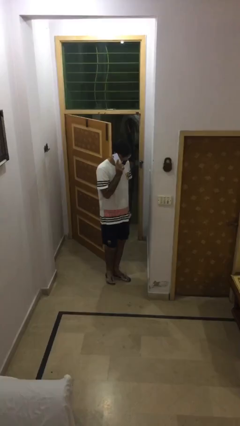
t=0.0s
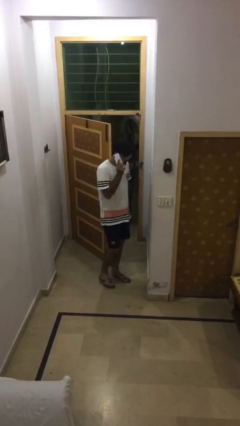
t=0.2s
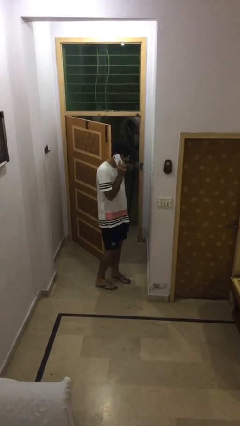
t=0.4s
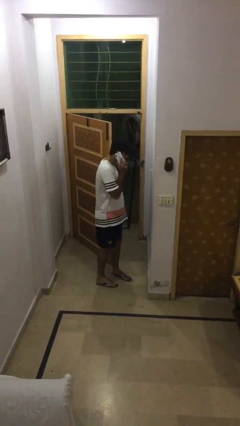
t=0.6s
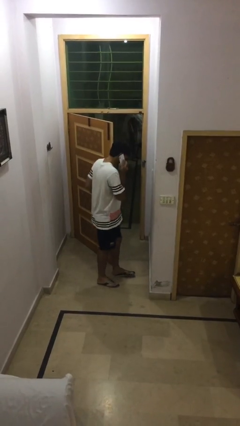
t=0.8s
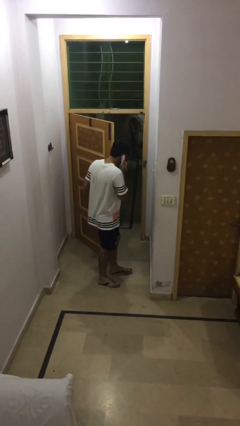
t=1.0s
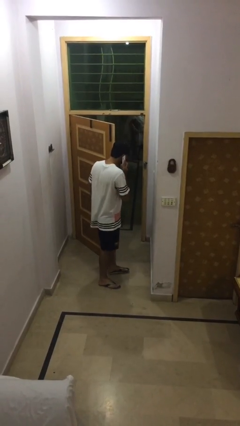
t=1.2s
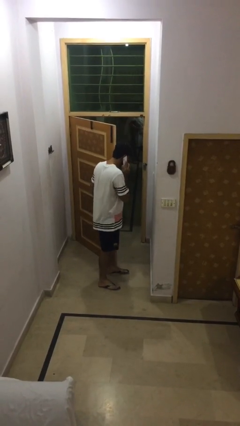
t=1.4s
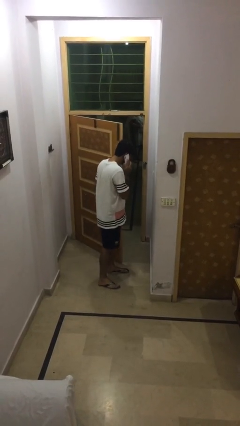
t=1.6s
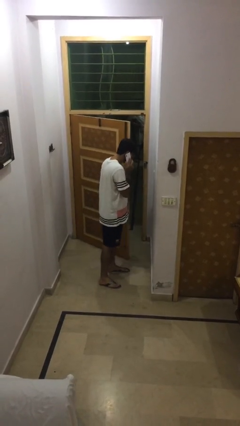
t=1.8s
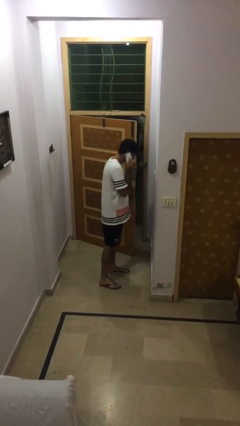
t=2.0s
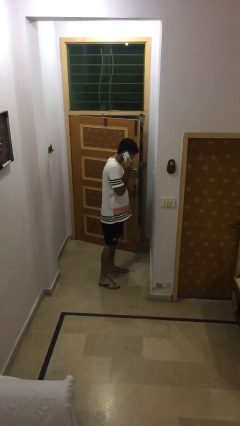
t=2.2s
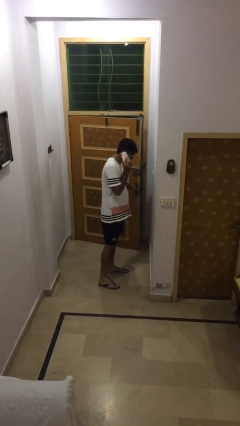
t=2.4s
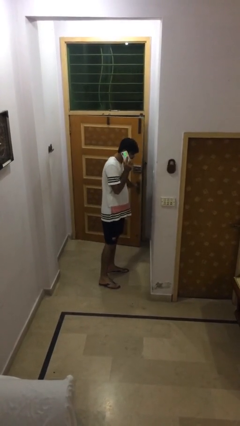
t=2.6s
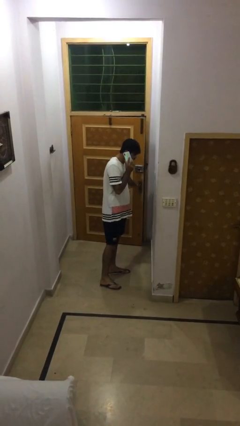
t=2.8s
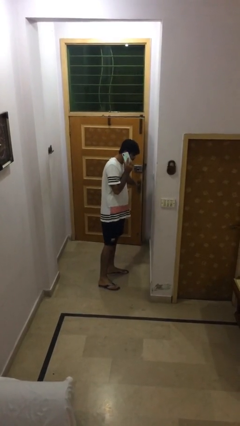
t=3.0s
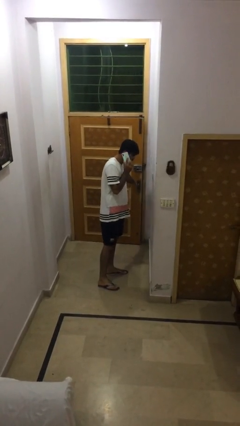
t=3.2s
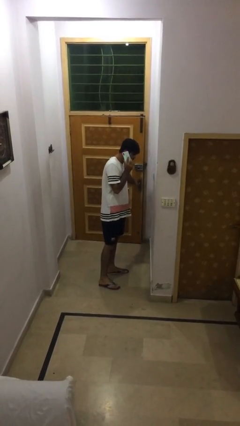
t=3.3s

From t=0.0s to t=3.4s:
person closes facility door

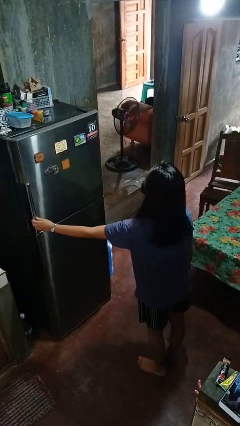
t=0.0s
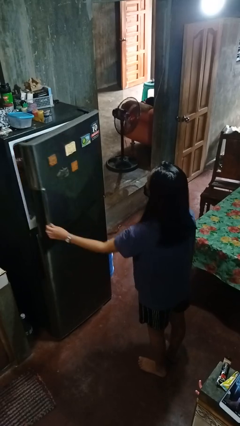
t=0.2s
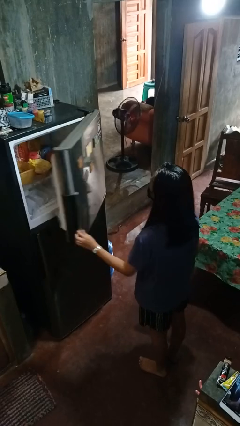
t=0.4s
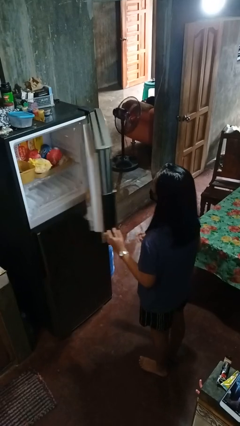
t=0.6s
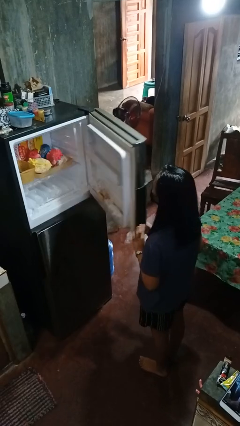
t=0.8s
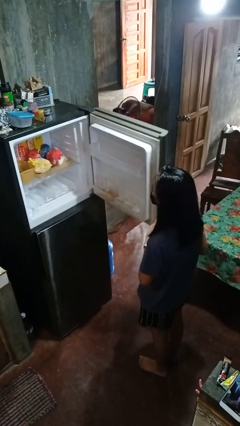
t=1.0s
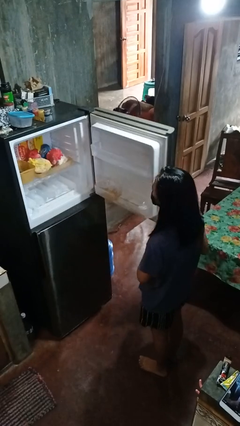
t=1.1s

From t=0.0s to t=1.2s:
person opens refrigerator

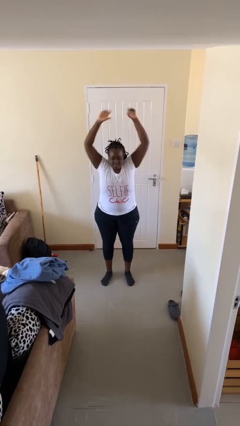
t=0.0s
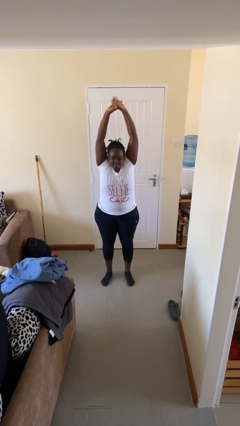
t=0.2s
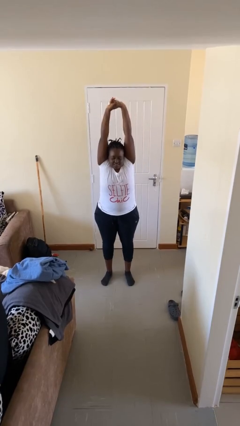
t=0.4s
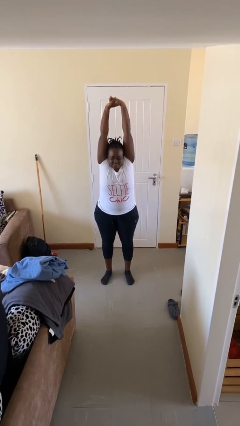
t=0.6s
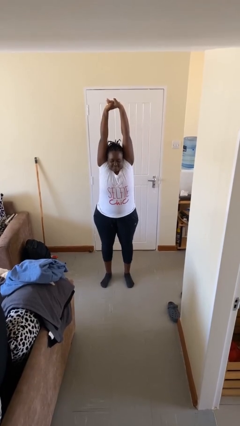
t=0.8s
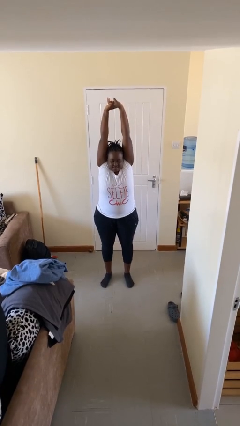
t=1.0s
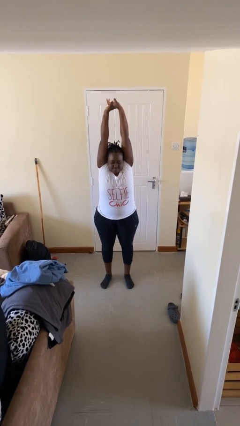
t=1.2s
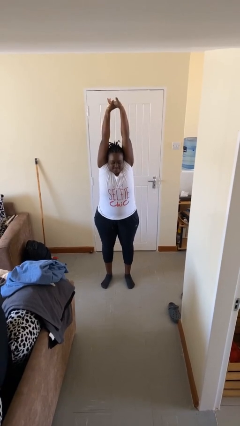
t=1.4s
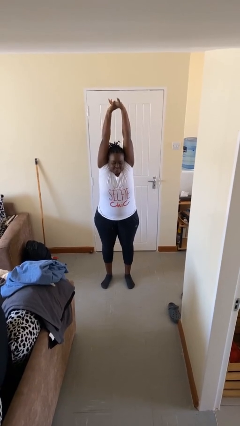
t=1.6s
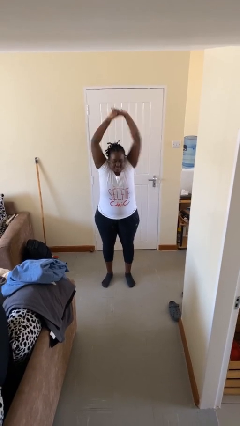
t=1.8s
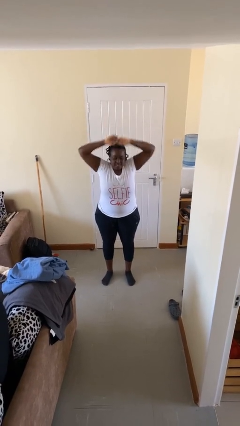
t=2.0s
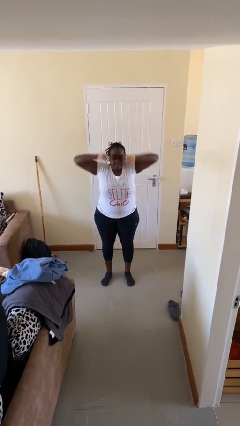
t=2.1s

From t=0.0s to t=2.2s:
person stretches arms over head

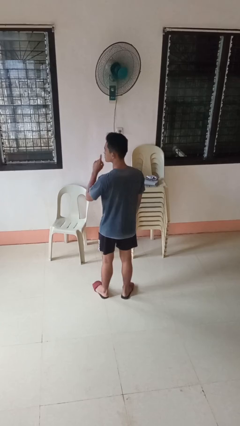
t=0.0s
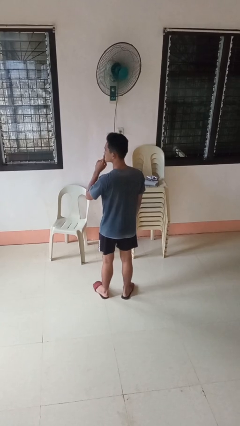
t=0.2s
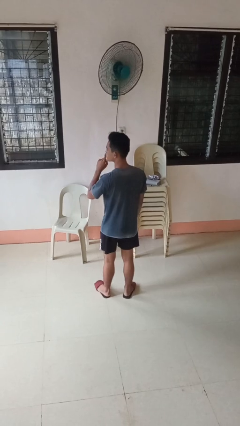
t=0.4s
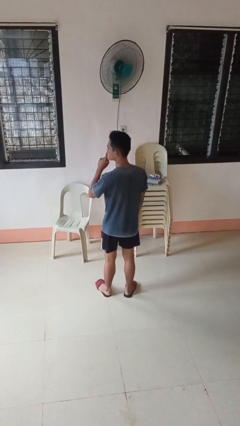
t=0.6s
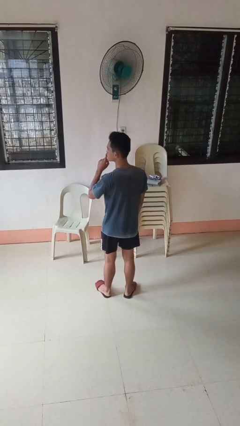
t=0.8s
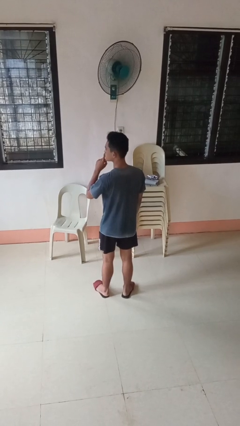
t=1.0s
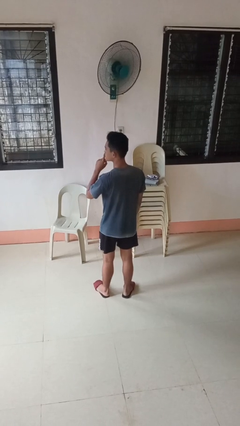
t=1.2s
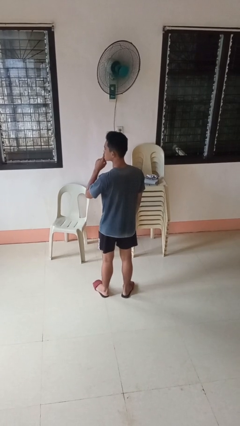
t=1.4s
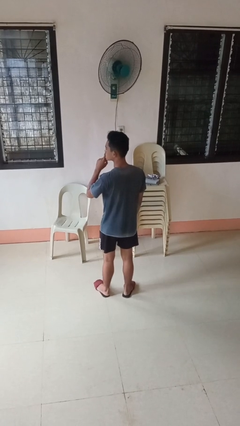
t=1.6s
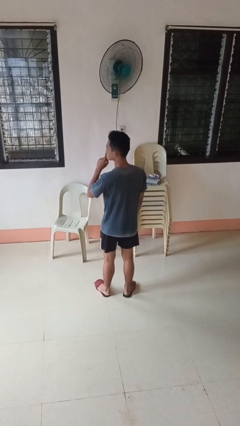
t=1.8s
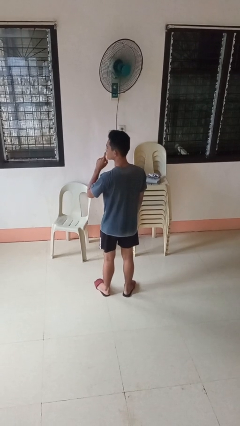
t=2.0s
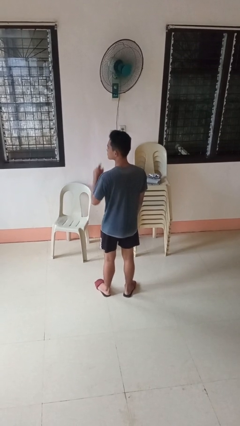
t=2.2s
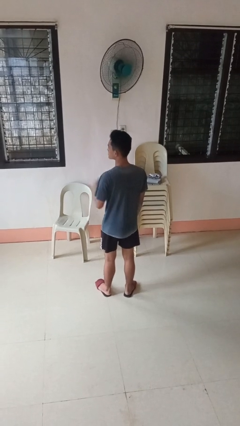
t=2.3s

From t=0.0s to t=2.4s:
person gestures be quiet

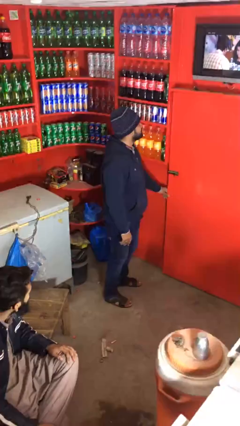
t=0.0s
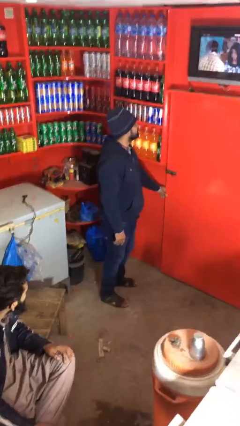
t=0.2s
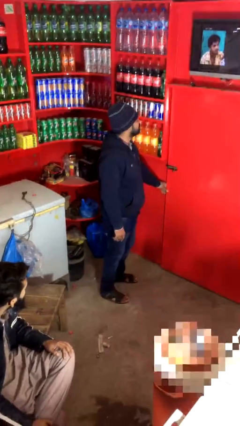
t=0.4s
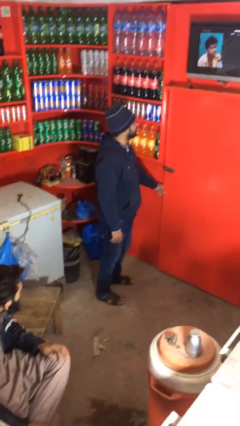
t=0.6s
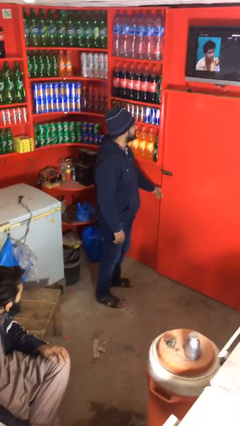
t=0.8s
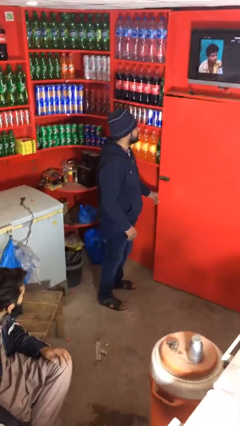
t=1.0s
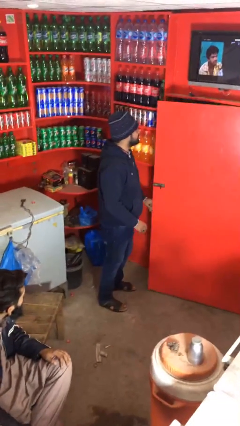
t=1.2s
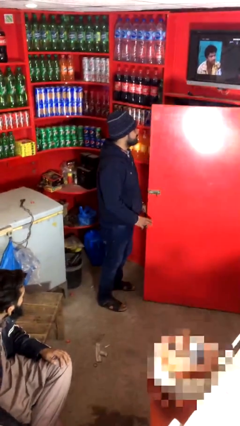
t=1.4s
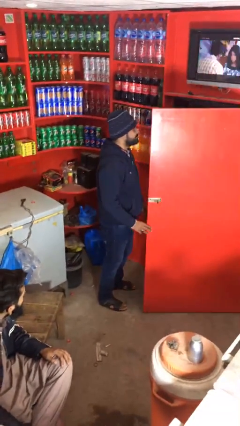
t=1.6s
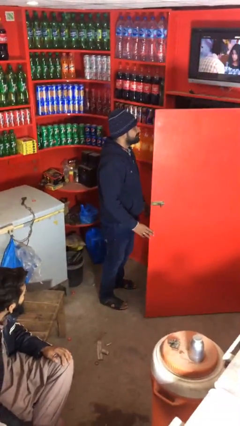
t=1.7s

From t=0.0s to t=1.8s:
person opens facility door

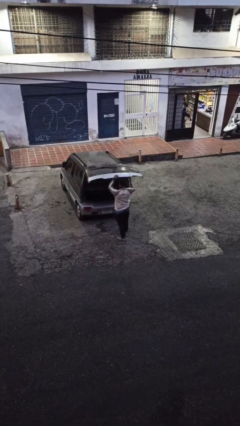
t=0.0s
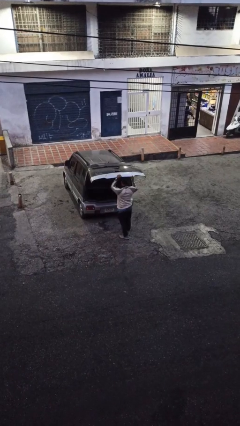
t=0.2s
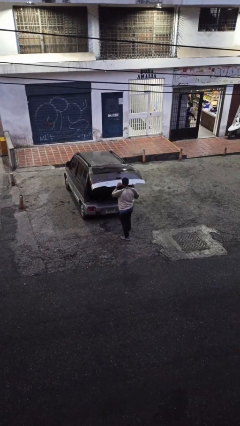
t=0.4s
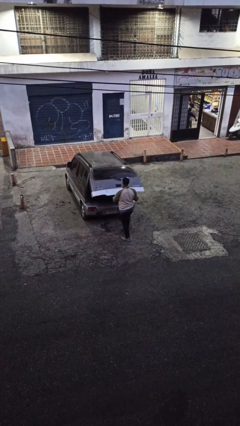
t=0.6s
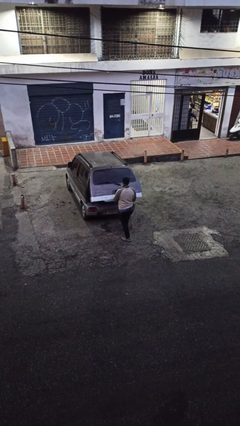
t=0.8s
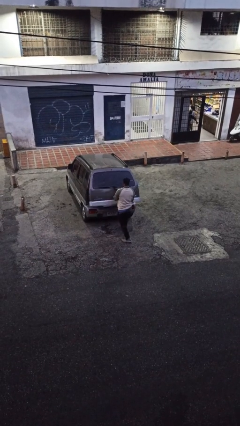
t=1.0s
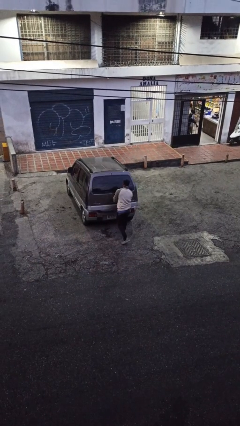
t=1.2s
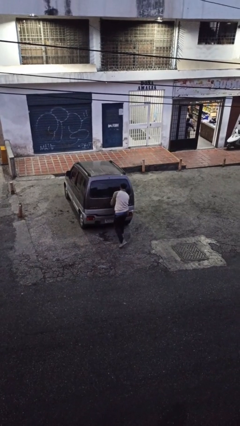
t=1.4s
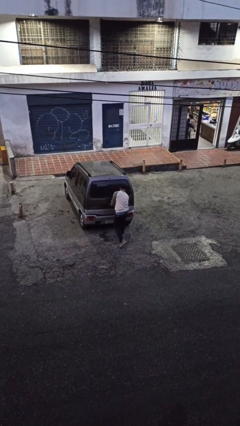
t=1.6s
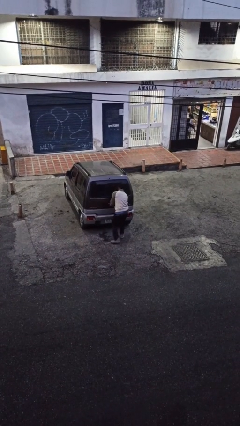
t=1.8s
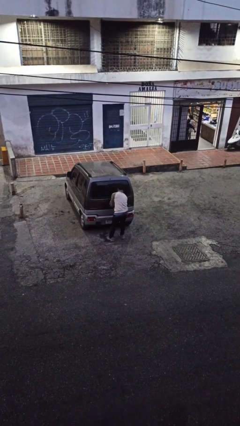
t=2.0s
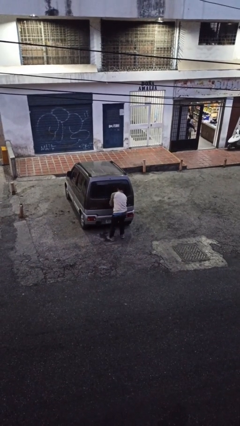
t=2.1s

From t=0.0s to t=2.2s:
person closes car trunk

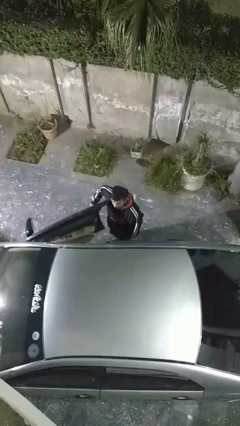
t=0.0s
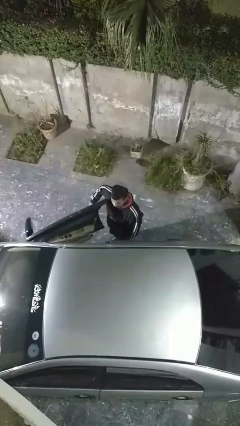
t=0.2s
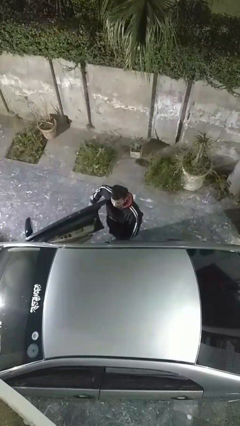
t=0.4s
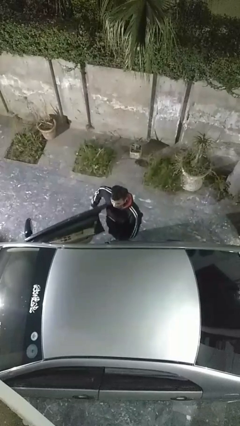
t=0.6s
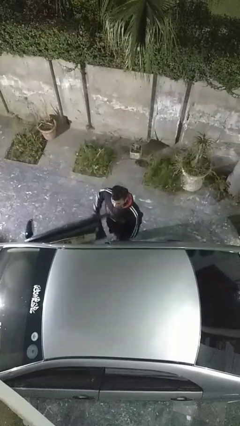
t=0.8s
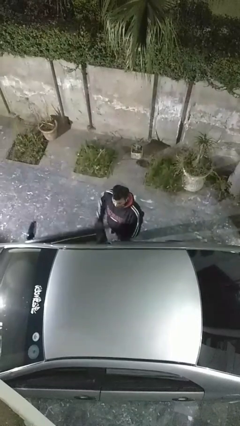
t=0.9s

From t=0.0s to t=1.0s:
person closes car door

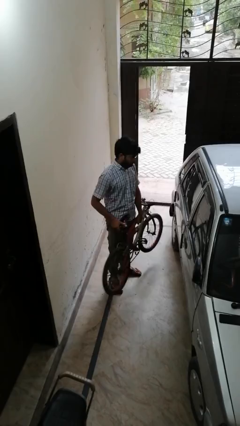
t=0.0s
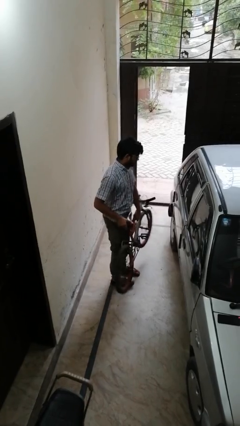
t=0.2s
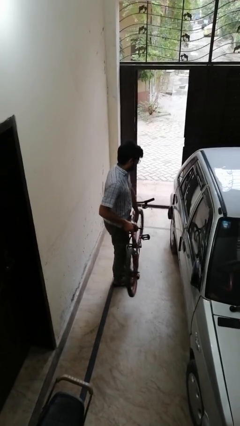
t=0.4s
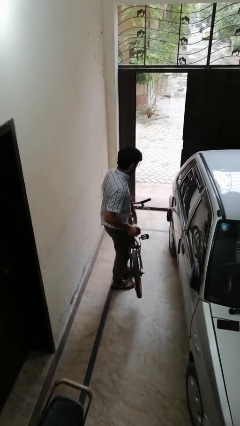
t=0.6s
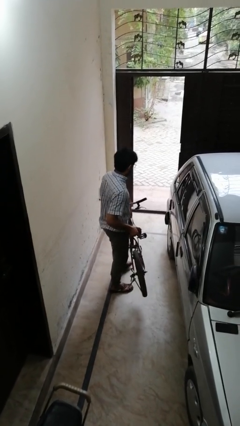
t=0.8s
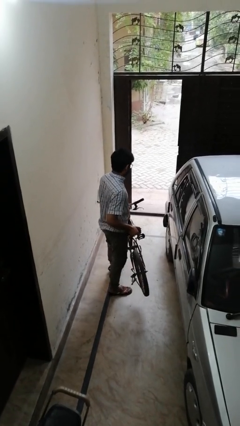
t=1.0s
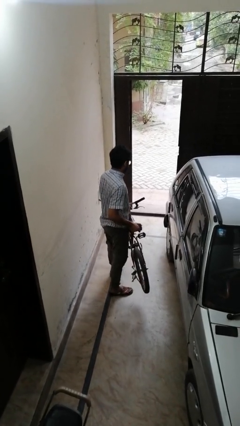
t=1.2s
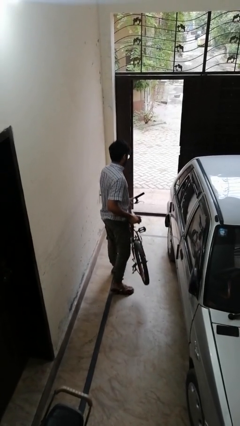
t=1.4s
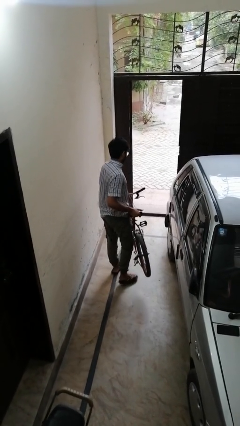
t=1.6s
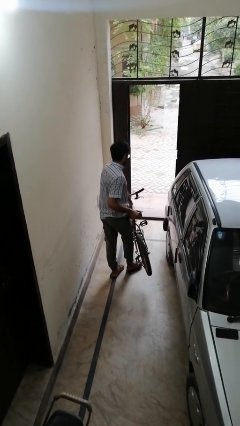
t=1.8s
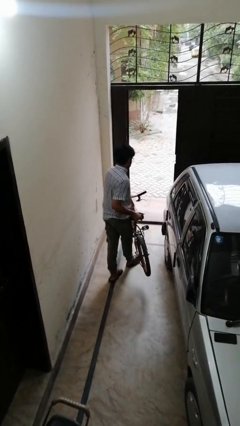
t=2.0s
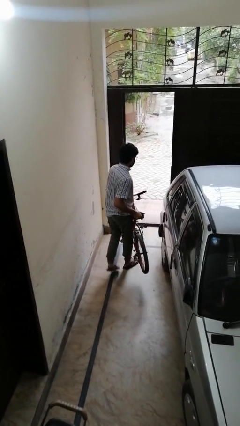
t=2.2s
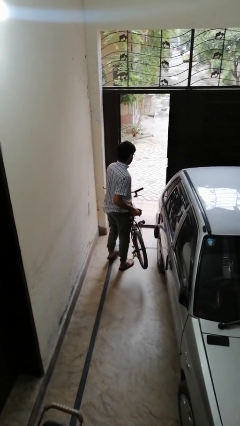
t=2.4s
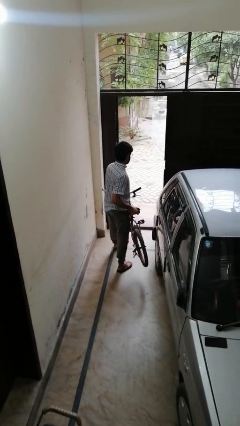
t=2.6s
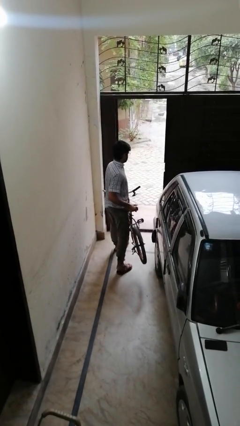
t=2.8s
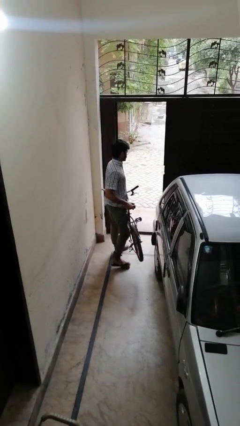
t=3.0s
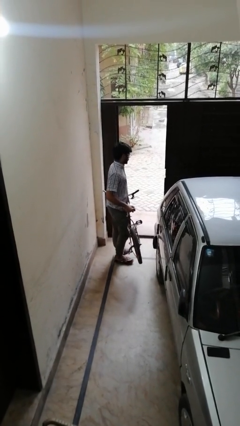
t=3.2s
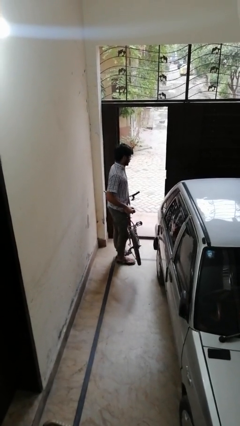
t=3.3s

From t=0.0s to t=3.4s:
person carries bicycle
